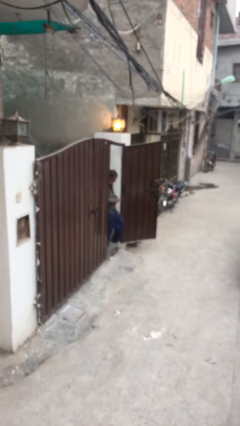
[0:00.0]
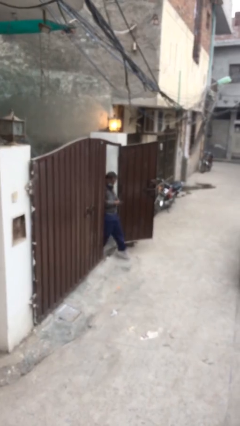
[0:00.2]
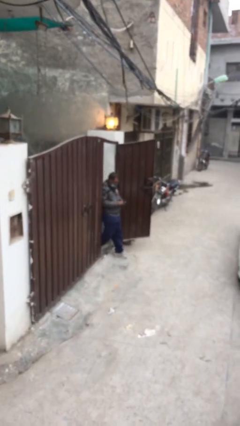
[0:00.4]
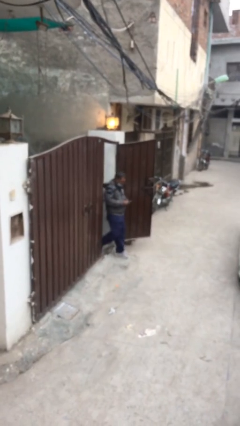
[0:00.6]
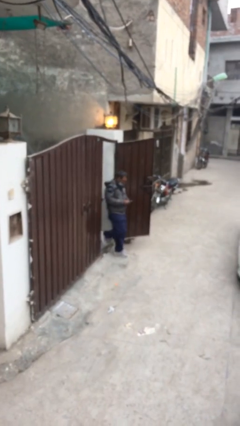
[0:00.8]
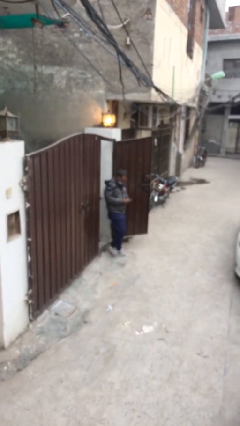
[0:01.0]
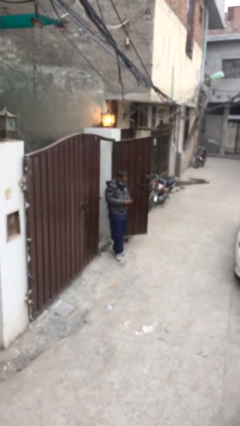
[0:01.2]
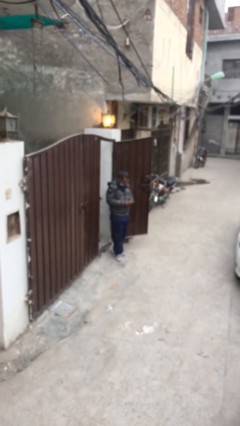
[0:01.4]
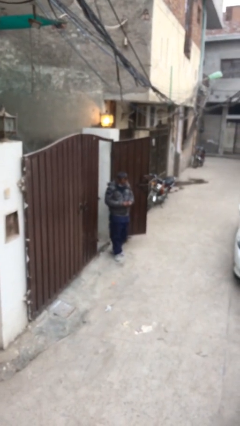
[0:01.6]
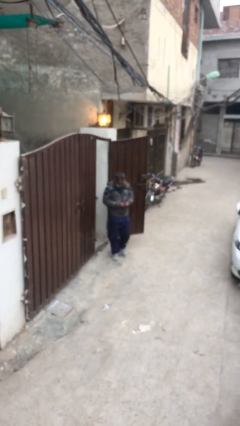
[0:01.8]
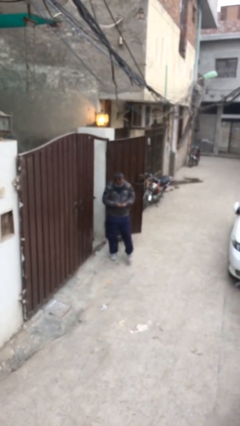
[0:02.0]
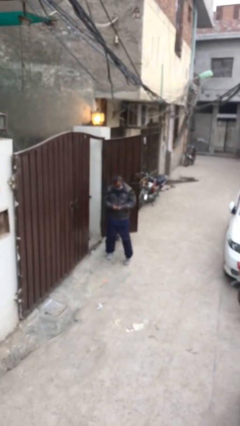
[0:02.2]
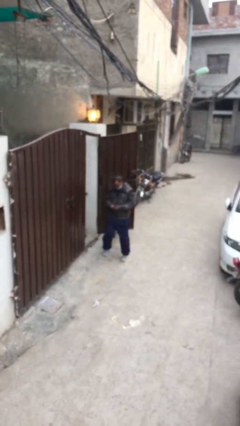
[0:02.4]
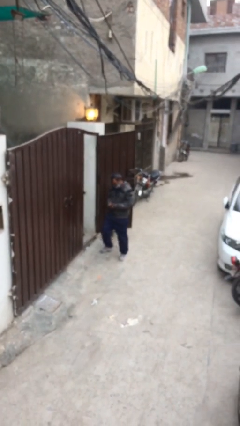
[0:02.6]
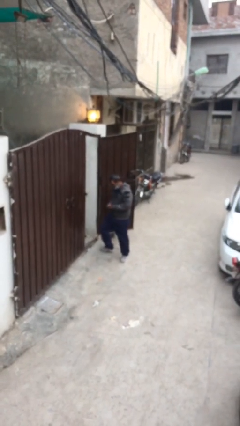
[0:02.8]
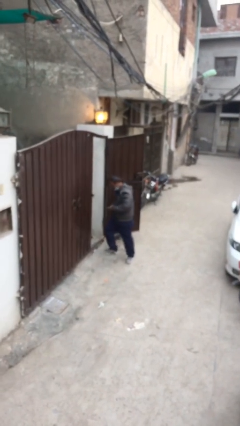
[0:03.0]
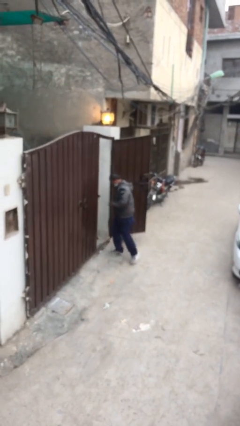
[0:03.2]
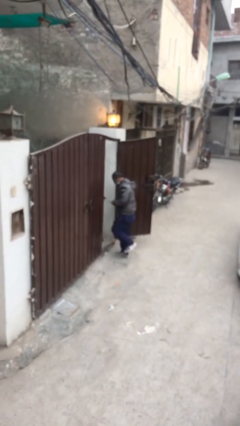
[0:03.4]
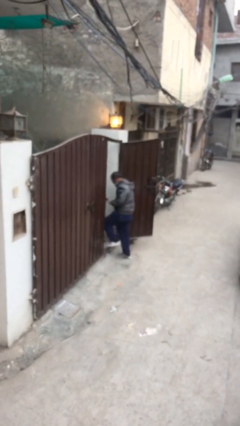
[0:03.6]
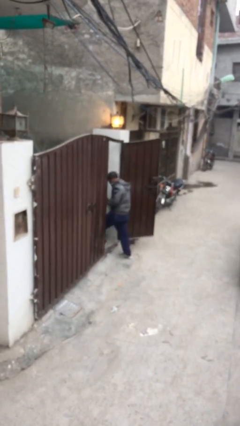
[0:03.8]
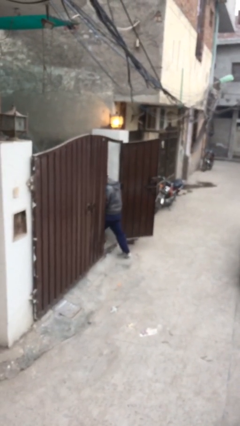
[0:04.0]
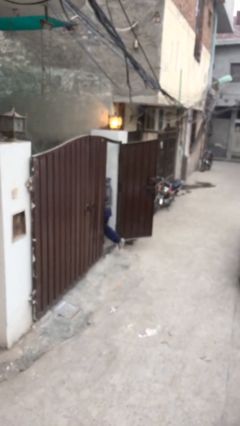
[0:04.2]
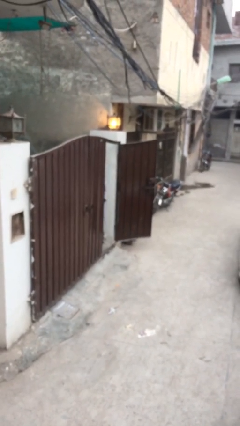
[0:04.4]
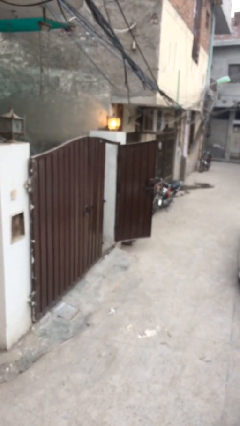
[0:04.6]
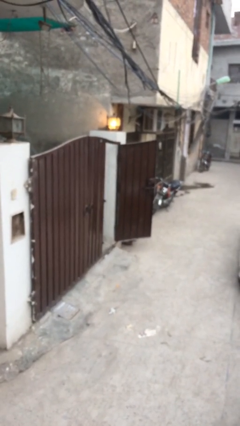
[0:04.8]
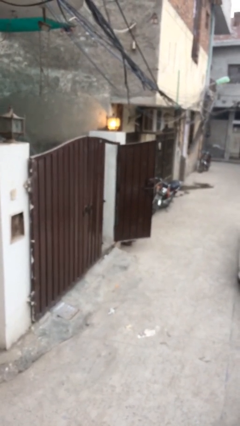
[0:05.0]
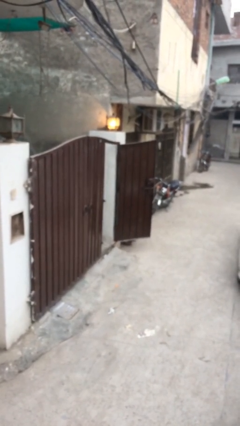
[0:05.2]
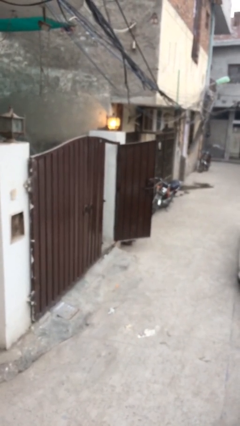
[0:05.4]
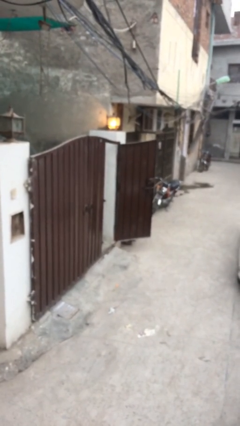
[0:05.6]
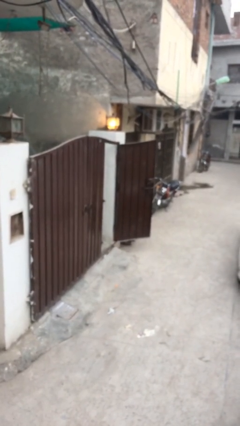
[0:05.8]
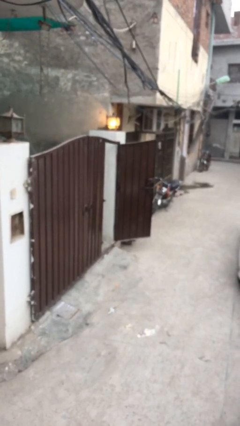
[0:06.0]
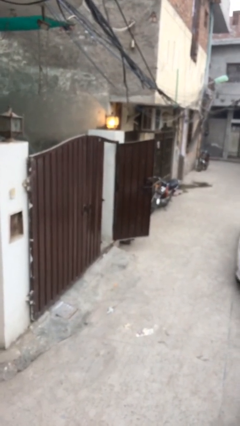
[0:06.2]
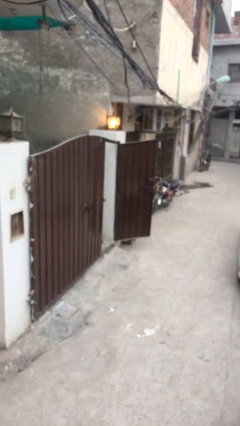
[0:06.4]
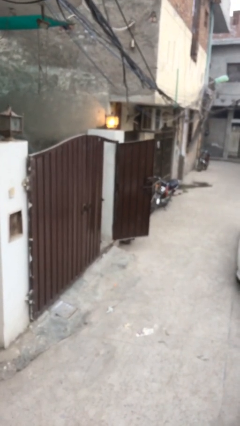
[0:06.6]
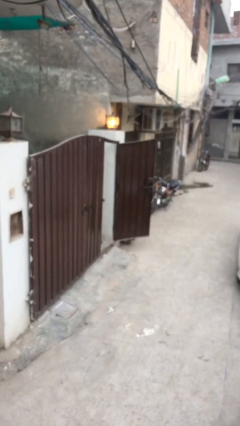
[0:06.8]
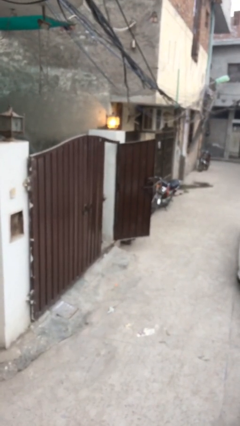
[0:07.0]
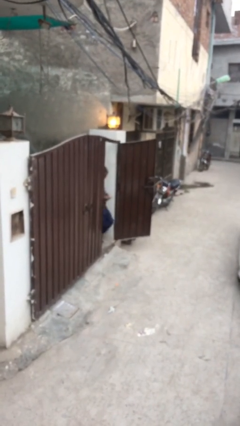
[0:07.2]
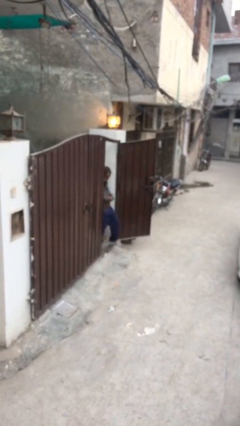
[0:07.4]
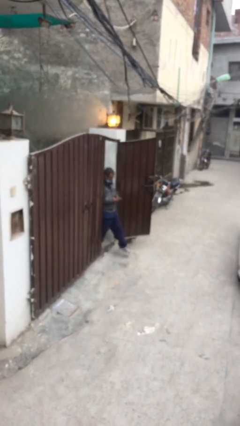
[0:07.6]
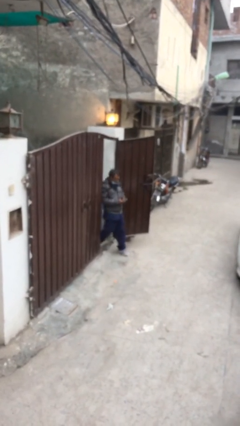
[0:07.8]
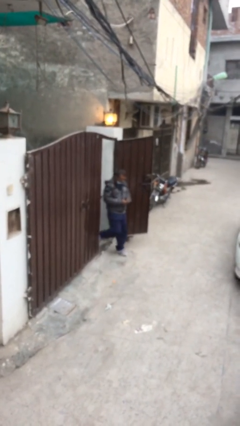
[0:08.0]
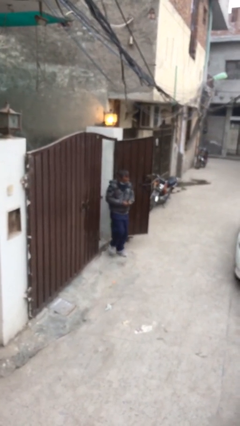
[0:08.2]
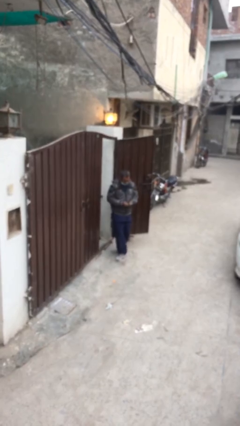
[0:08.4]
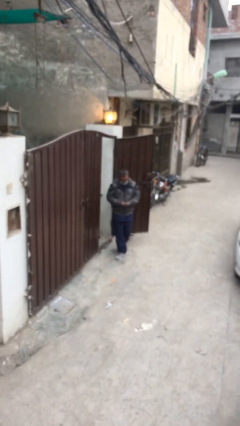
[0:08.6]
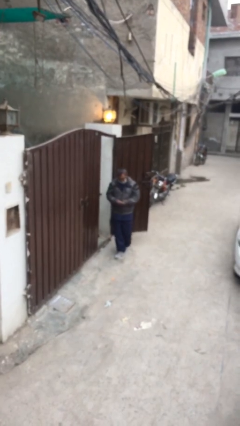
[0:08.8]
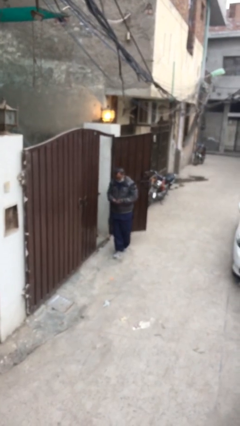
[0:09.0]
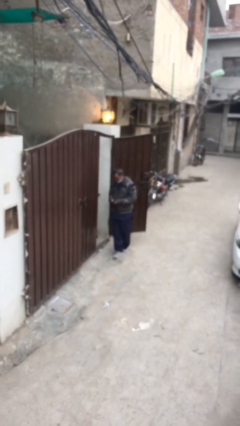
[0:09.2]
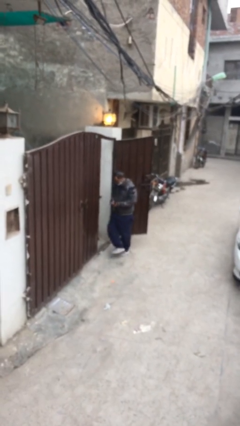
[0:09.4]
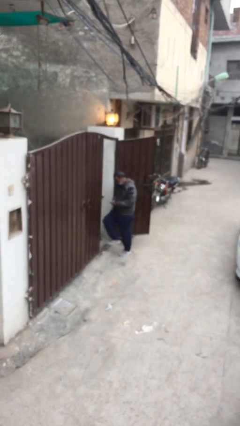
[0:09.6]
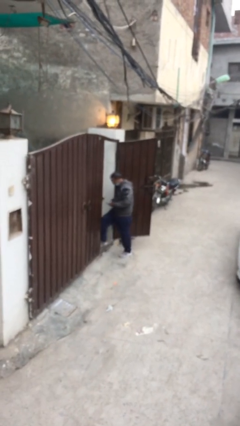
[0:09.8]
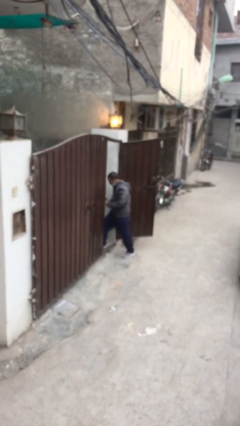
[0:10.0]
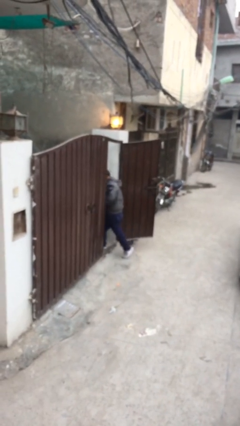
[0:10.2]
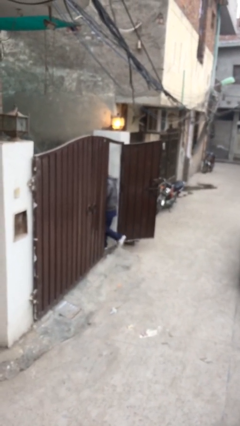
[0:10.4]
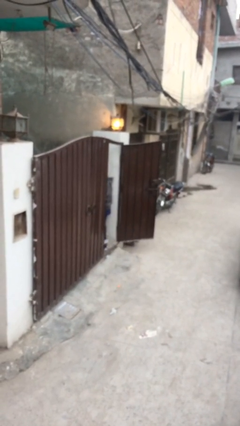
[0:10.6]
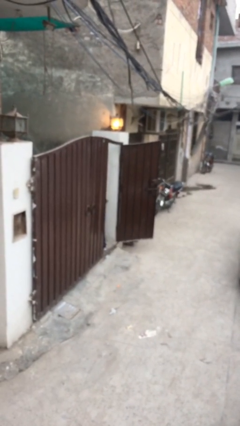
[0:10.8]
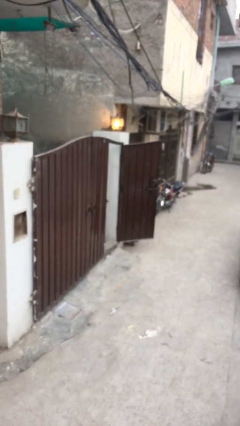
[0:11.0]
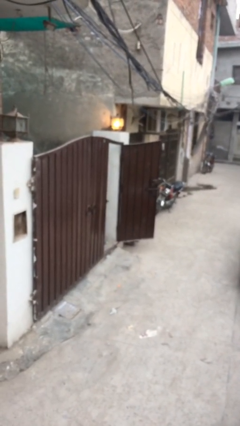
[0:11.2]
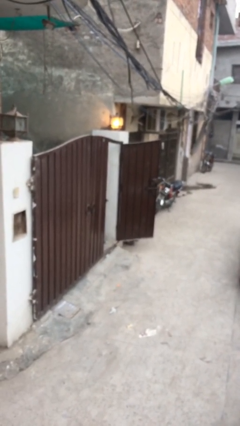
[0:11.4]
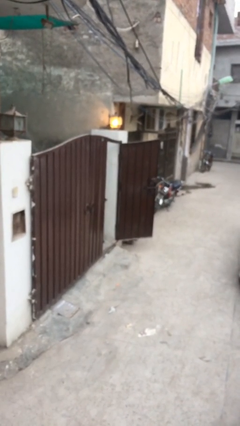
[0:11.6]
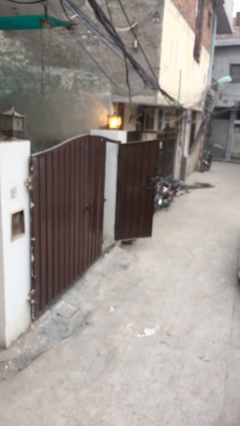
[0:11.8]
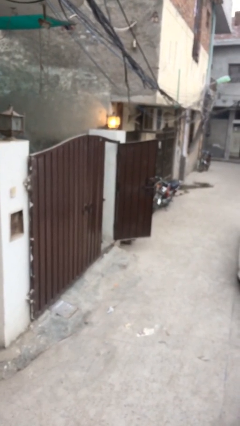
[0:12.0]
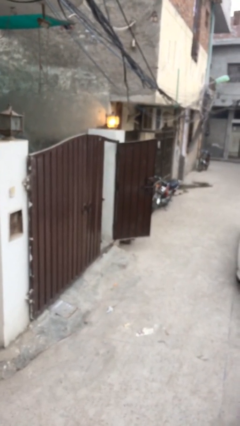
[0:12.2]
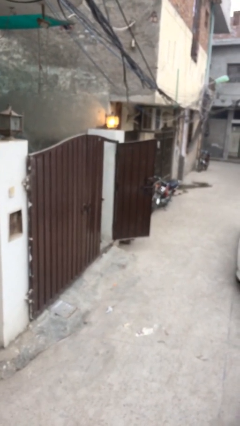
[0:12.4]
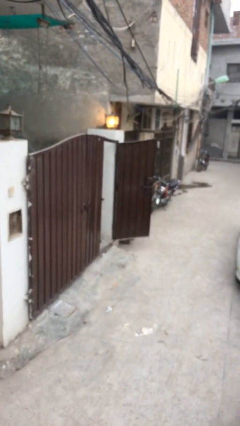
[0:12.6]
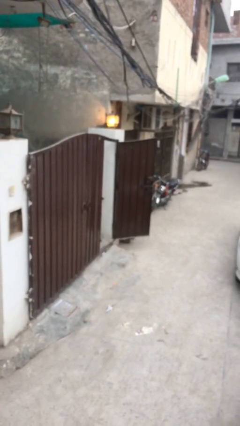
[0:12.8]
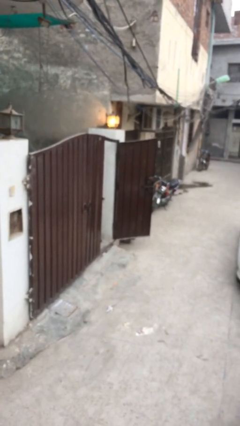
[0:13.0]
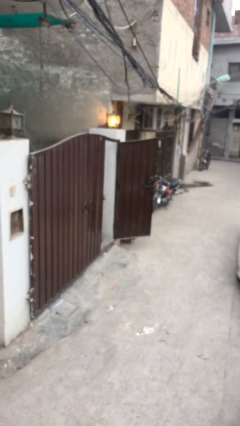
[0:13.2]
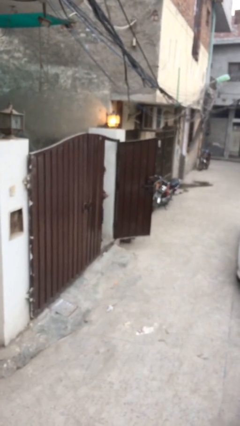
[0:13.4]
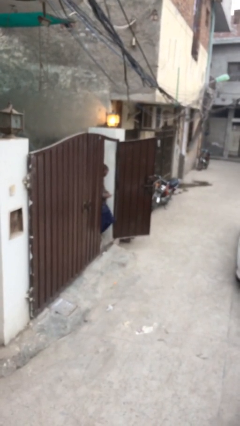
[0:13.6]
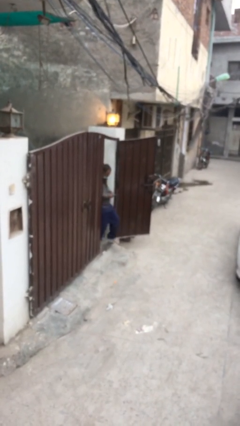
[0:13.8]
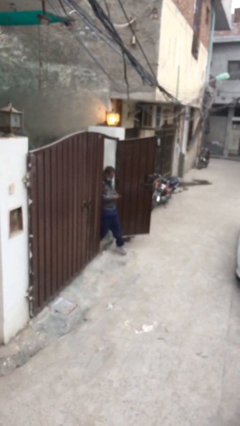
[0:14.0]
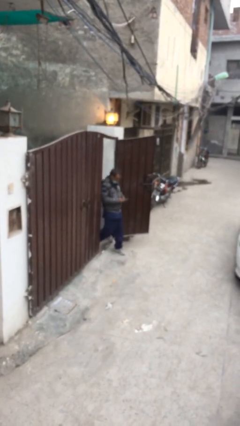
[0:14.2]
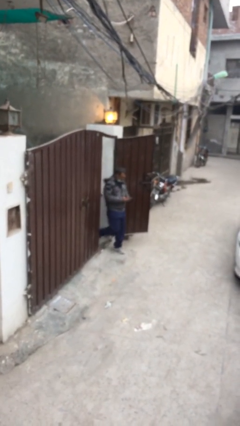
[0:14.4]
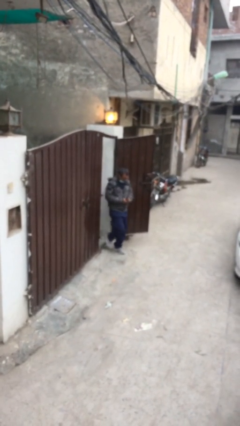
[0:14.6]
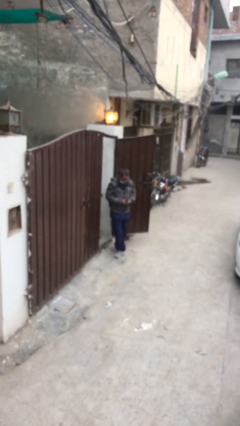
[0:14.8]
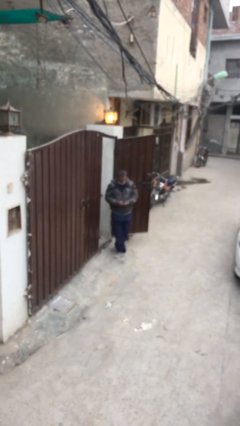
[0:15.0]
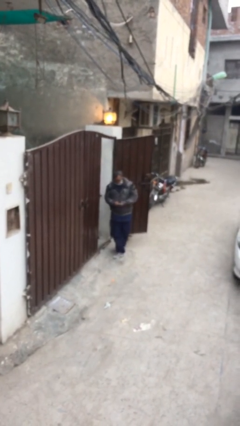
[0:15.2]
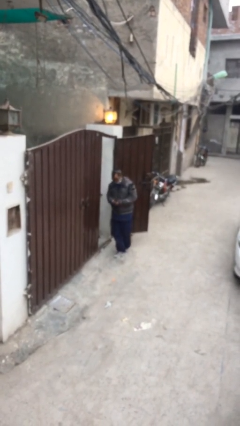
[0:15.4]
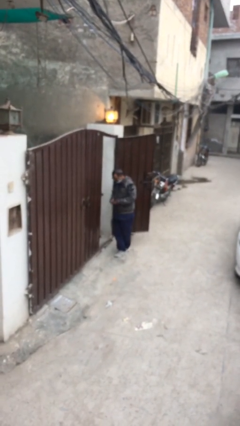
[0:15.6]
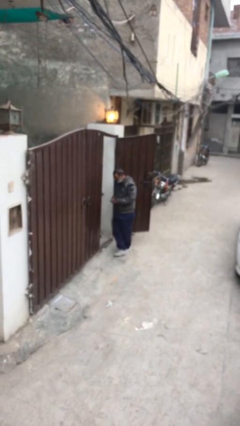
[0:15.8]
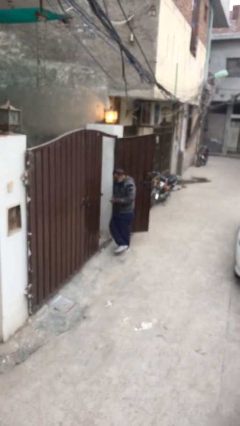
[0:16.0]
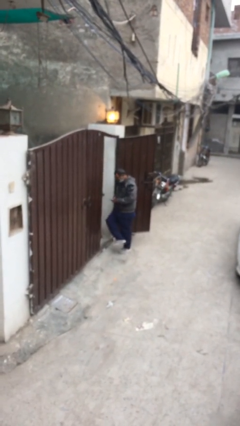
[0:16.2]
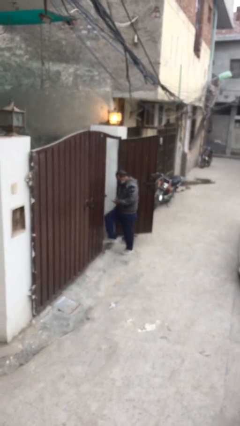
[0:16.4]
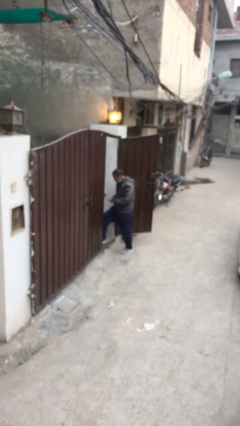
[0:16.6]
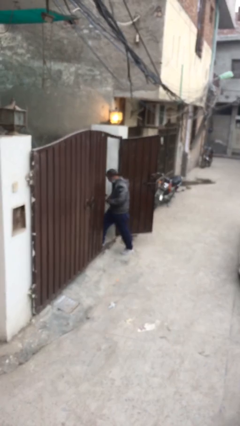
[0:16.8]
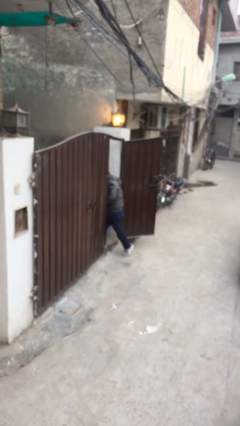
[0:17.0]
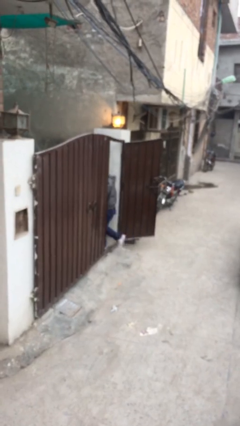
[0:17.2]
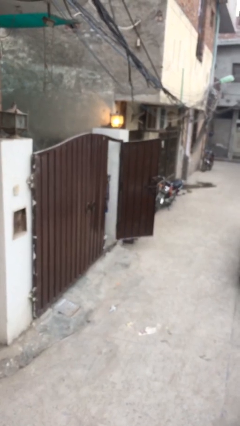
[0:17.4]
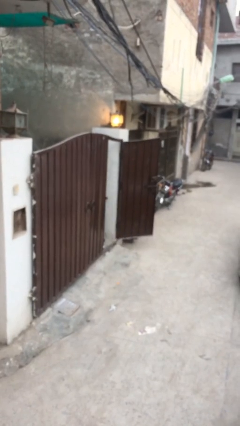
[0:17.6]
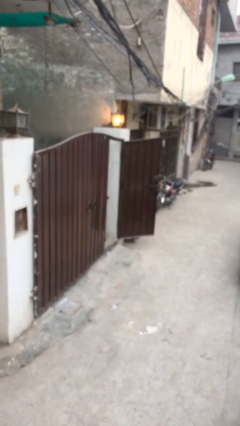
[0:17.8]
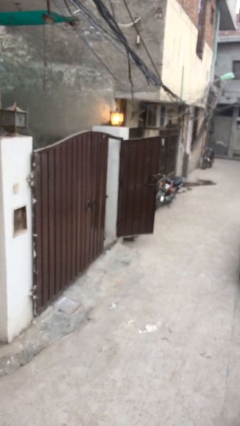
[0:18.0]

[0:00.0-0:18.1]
person texts on phone
